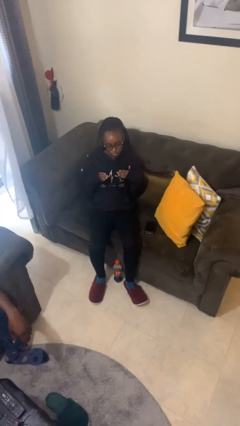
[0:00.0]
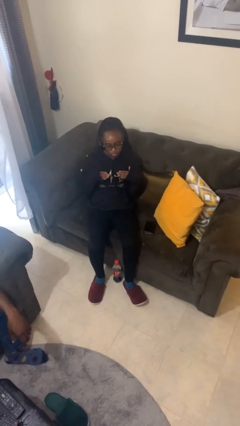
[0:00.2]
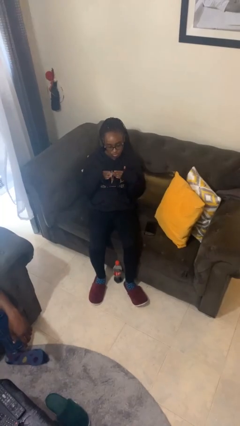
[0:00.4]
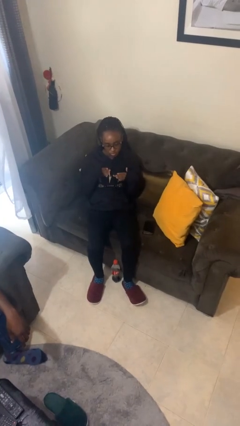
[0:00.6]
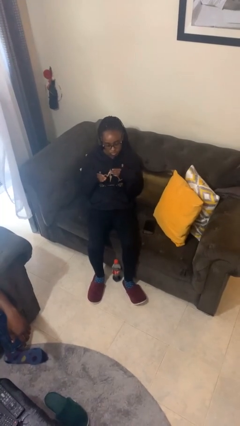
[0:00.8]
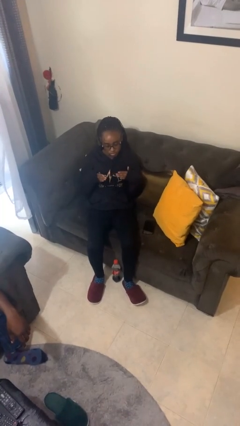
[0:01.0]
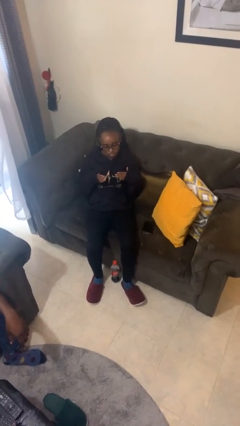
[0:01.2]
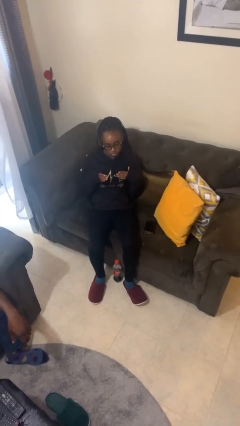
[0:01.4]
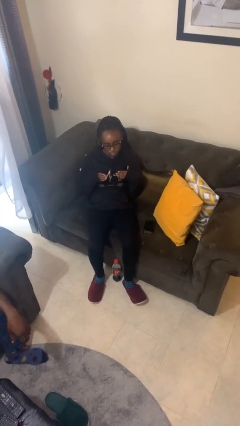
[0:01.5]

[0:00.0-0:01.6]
person drums on chest

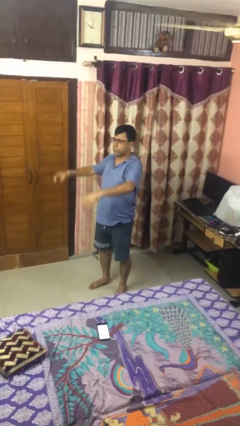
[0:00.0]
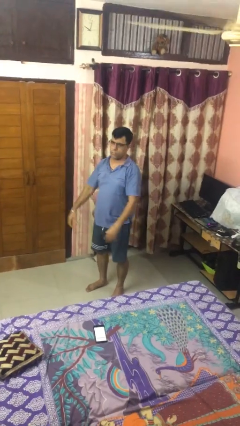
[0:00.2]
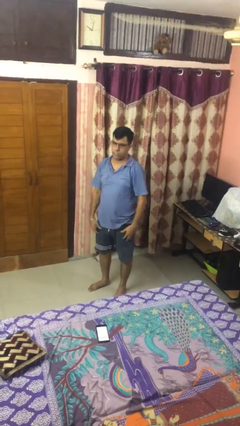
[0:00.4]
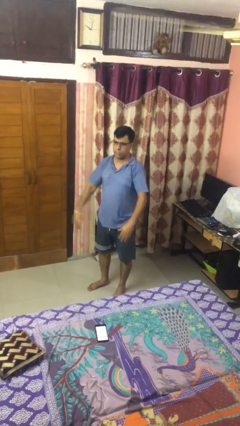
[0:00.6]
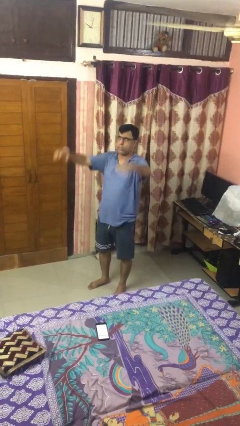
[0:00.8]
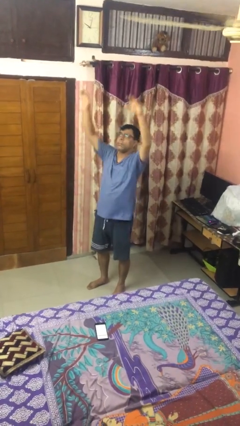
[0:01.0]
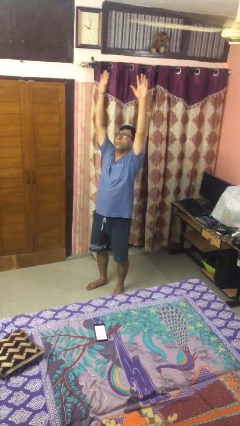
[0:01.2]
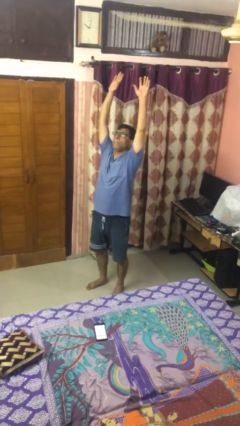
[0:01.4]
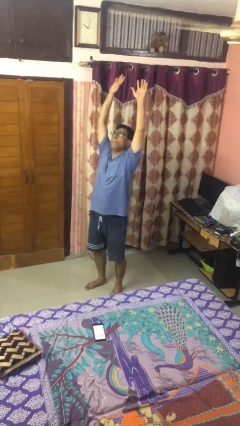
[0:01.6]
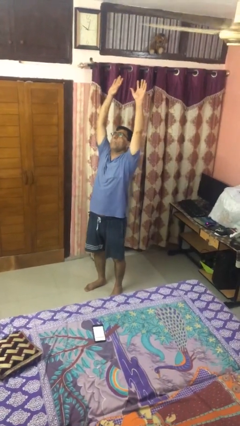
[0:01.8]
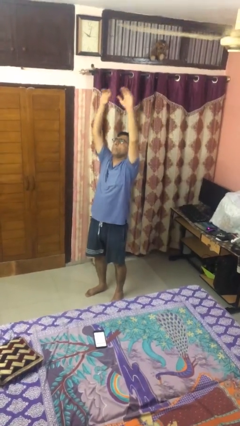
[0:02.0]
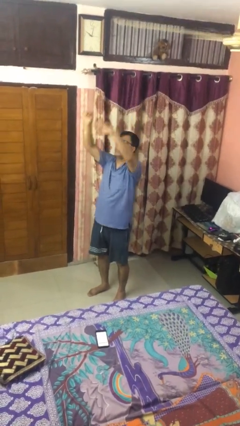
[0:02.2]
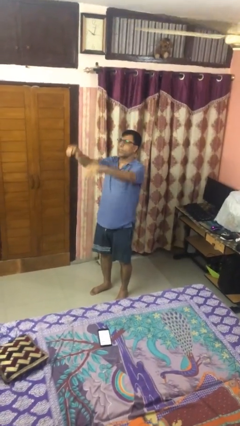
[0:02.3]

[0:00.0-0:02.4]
person stretches arms over head

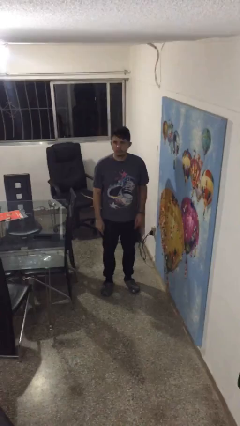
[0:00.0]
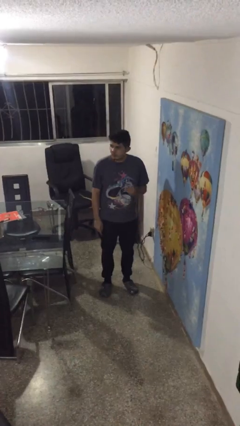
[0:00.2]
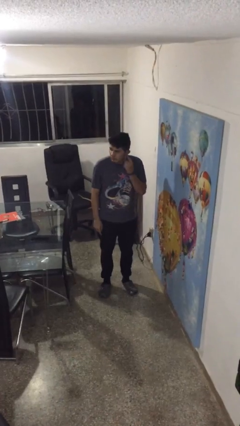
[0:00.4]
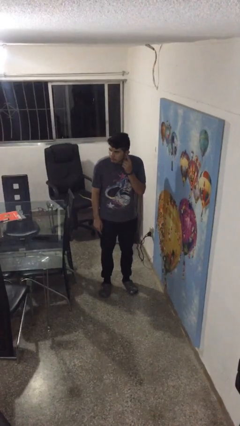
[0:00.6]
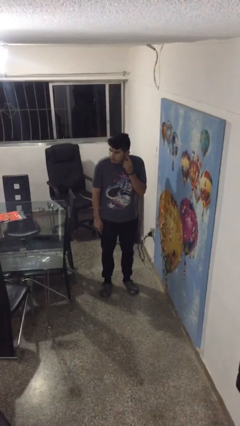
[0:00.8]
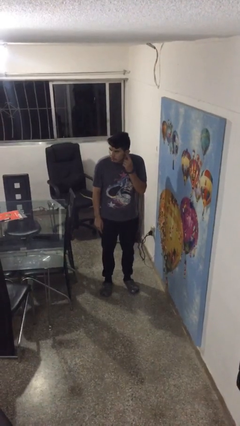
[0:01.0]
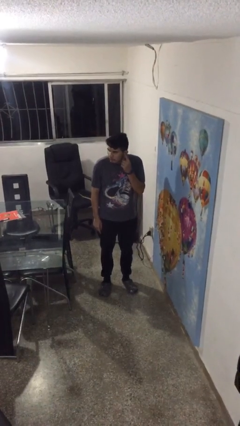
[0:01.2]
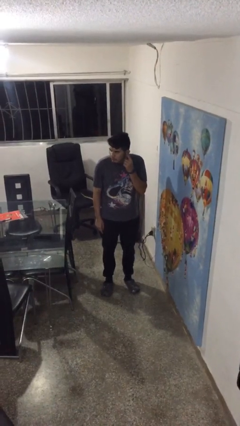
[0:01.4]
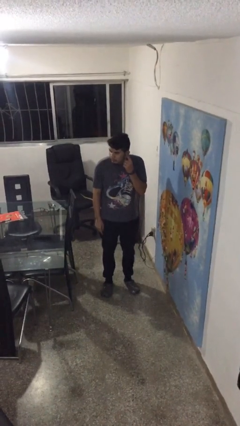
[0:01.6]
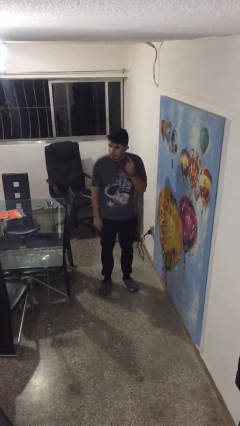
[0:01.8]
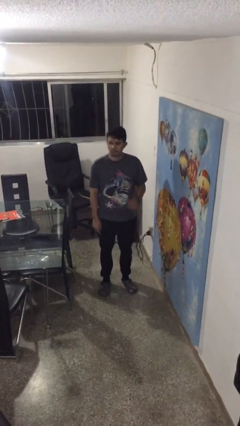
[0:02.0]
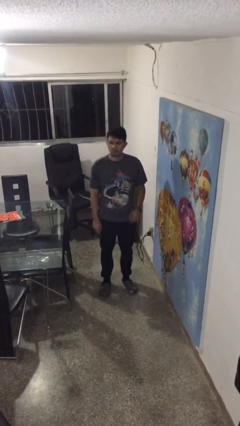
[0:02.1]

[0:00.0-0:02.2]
person gestures listen closely

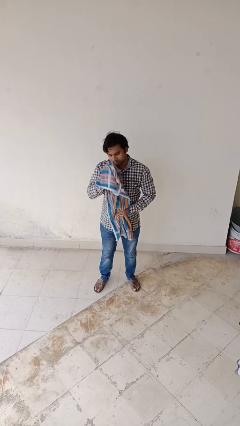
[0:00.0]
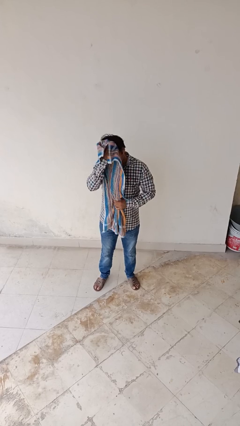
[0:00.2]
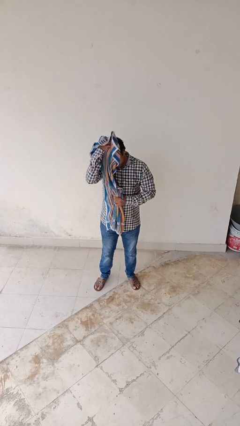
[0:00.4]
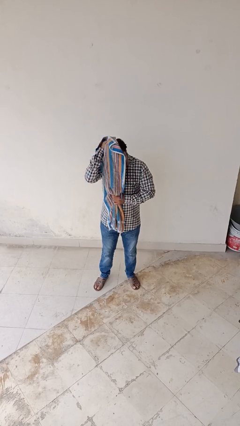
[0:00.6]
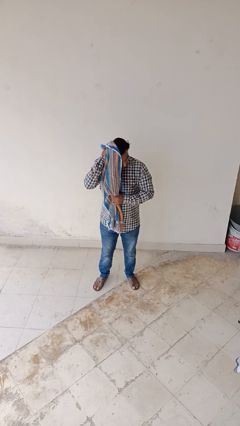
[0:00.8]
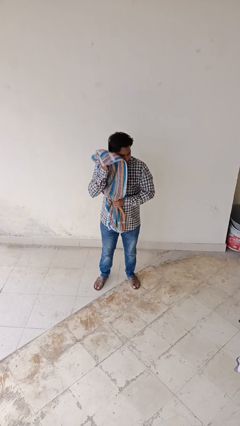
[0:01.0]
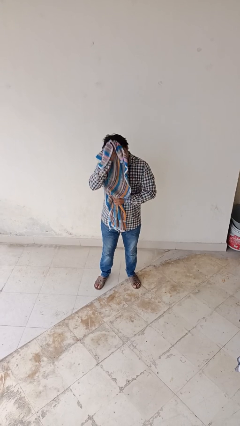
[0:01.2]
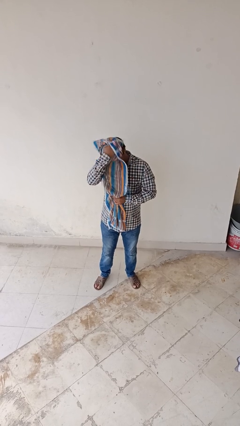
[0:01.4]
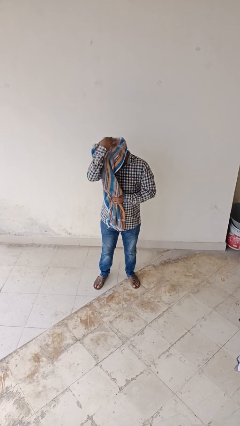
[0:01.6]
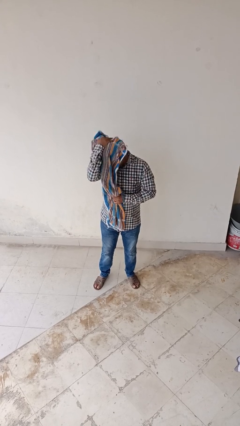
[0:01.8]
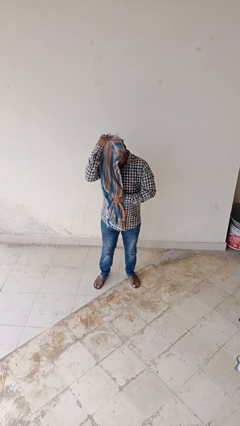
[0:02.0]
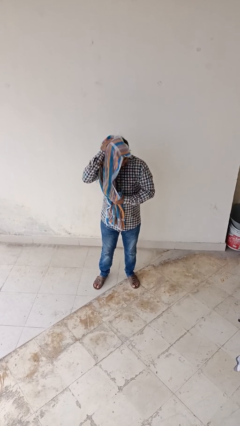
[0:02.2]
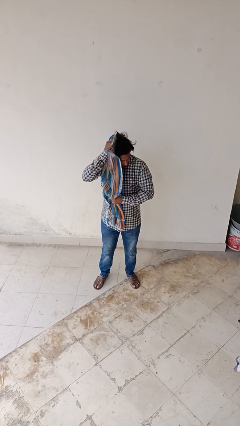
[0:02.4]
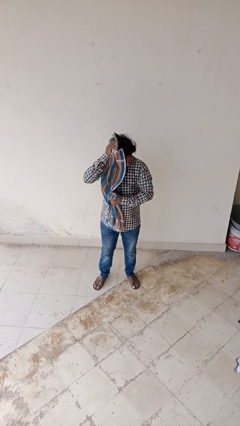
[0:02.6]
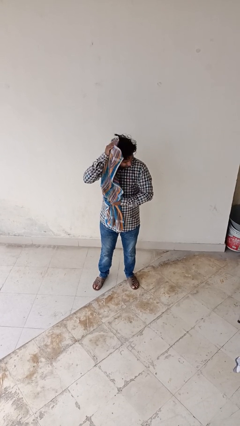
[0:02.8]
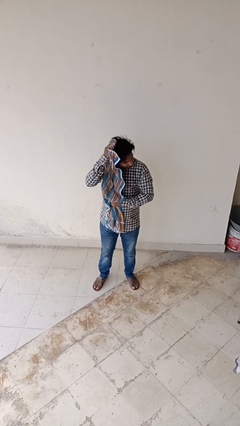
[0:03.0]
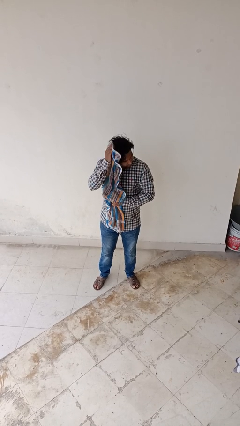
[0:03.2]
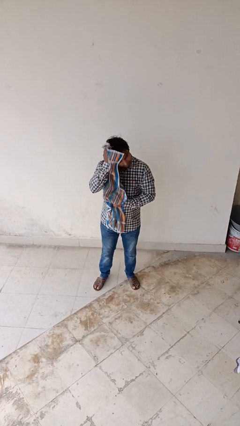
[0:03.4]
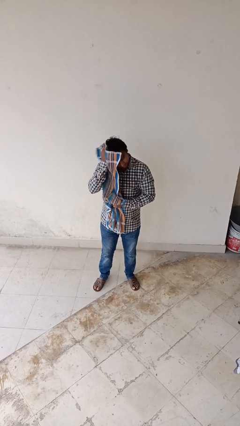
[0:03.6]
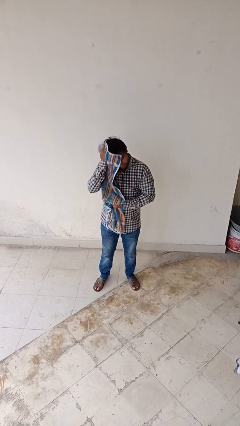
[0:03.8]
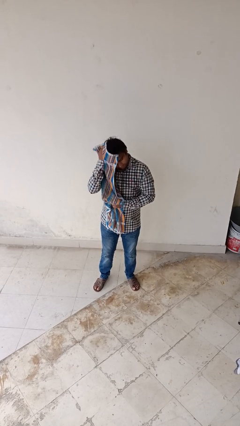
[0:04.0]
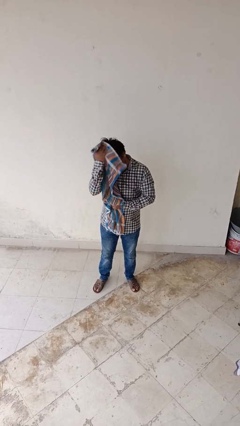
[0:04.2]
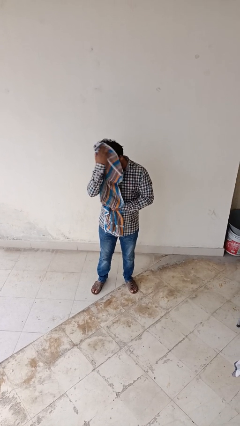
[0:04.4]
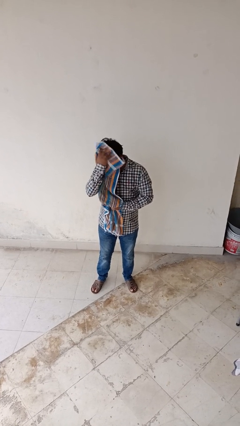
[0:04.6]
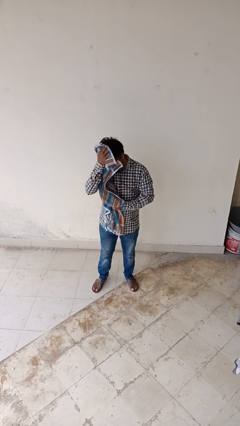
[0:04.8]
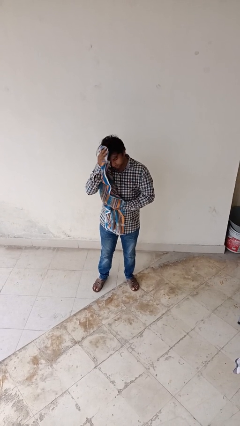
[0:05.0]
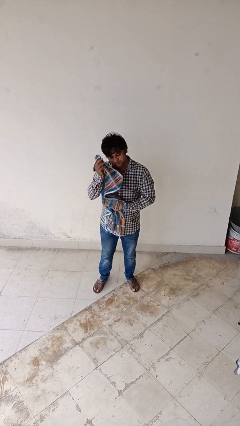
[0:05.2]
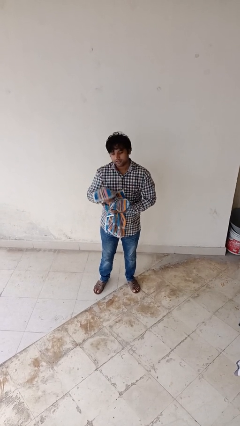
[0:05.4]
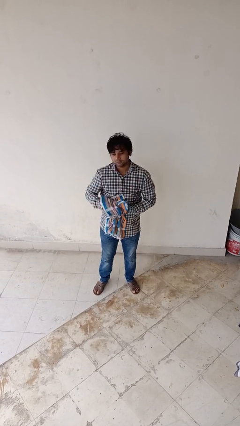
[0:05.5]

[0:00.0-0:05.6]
person dries hair with towel

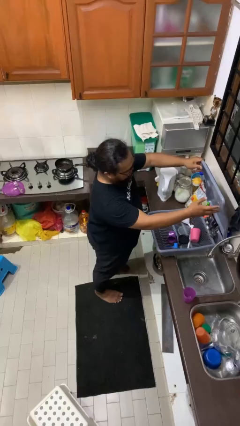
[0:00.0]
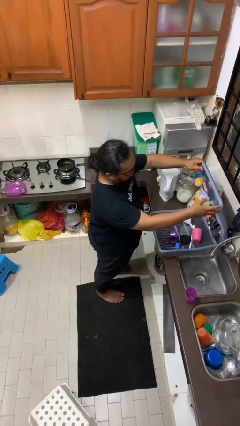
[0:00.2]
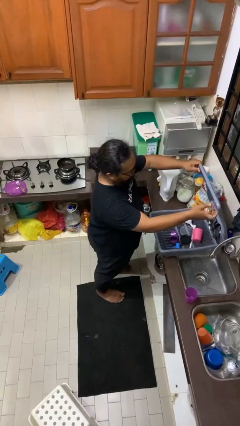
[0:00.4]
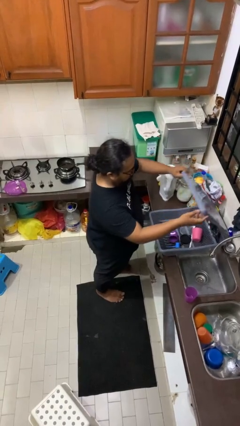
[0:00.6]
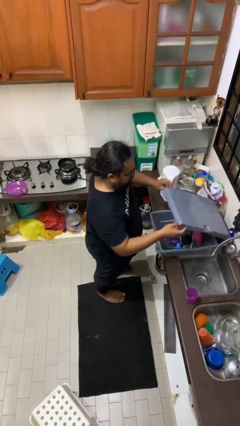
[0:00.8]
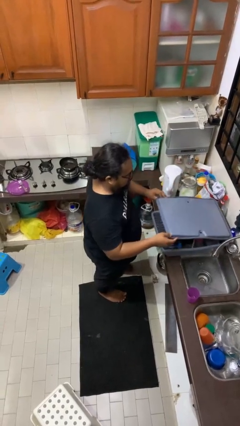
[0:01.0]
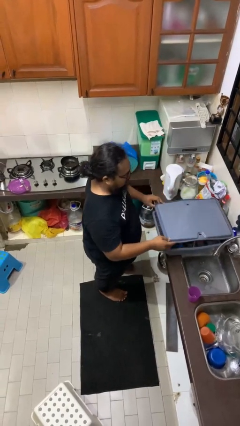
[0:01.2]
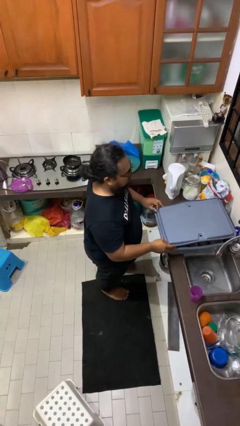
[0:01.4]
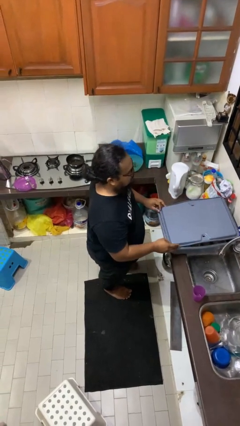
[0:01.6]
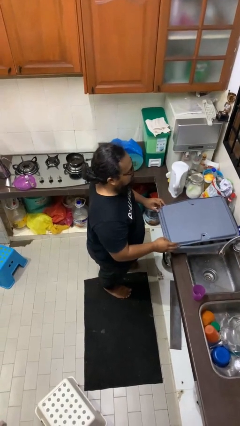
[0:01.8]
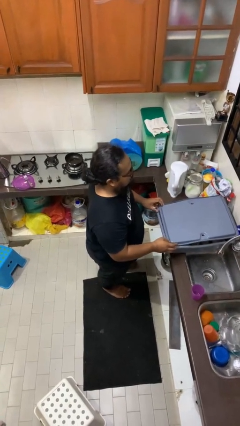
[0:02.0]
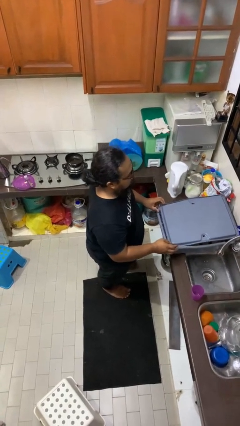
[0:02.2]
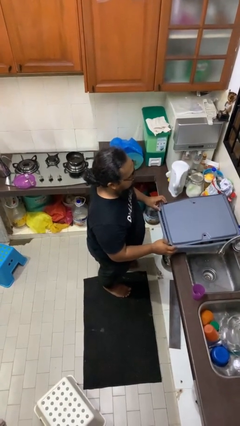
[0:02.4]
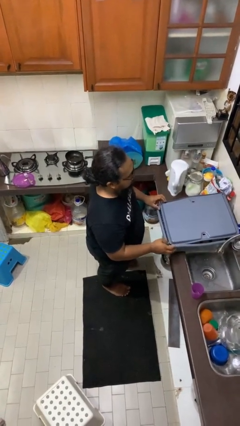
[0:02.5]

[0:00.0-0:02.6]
person closes dishwasher

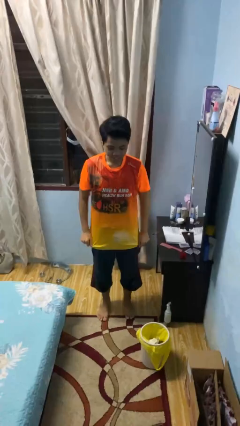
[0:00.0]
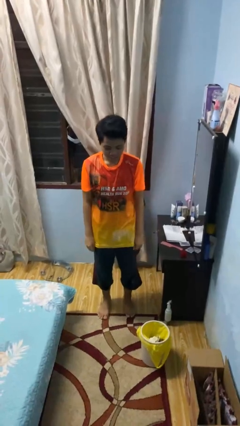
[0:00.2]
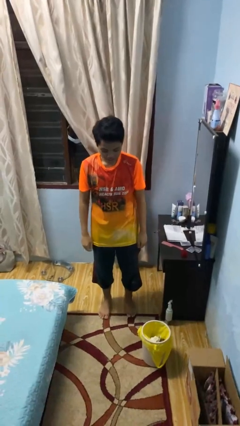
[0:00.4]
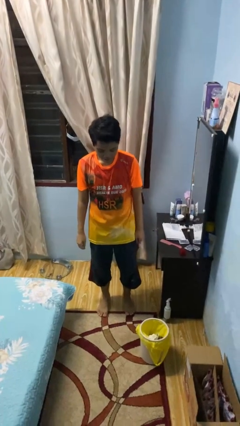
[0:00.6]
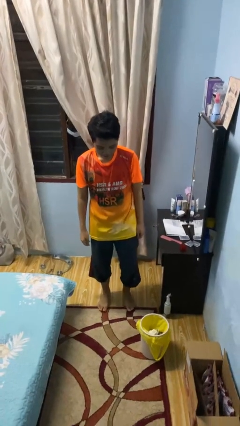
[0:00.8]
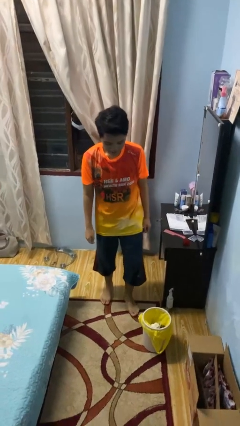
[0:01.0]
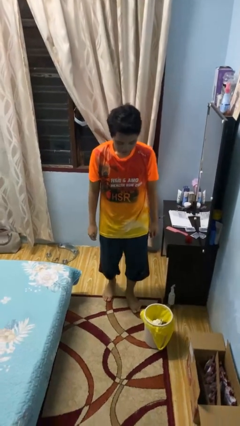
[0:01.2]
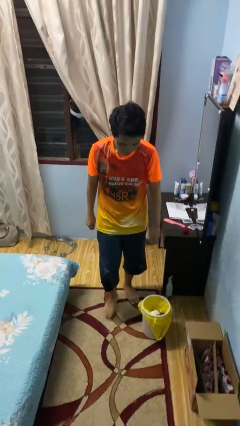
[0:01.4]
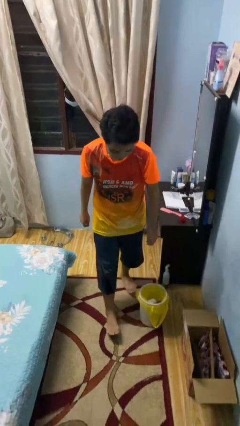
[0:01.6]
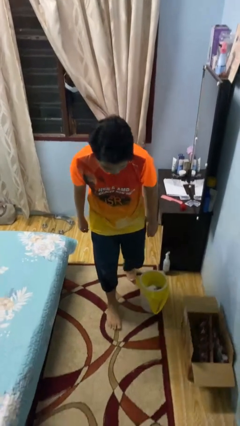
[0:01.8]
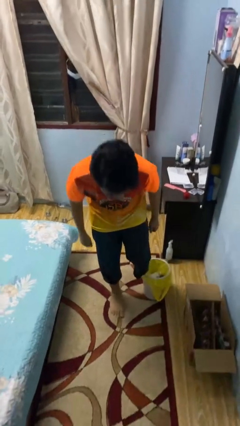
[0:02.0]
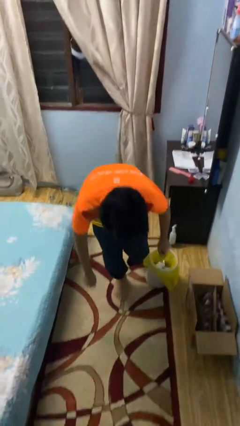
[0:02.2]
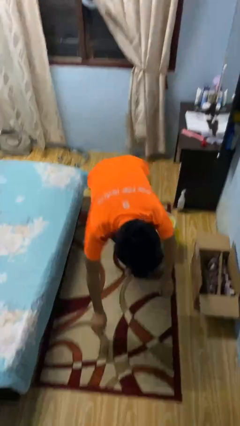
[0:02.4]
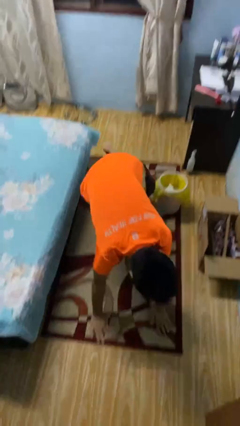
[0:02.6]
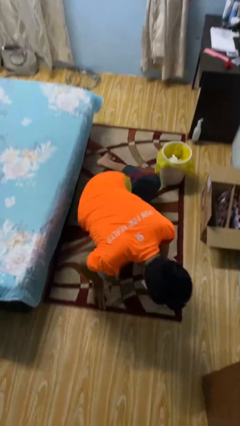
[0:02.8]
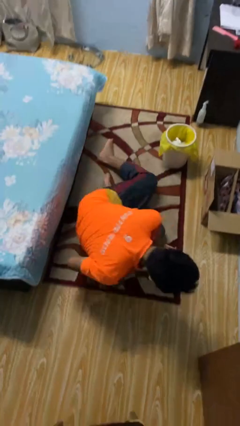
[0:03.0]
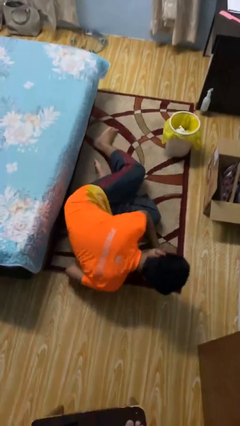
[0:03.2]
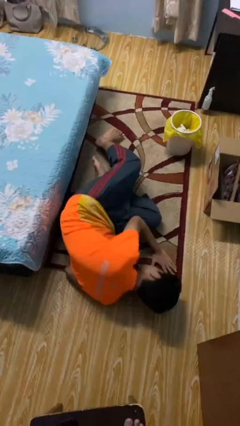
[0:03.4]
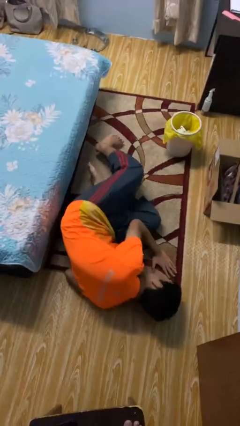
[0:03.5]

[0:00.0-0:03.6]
person trips on object on floor
